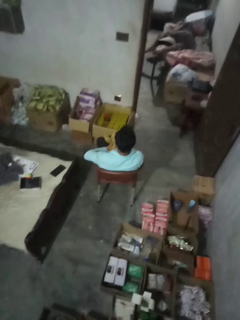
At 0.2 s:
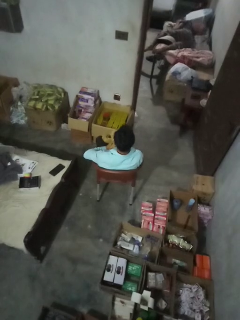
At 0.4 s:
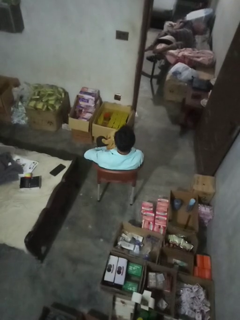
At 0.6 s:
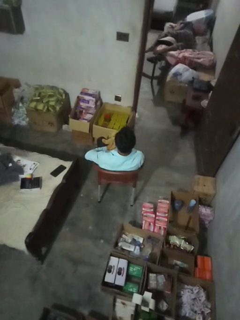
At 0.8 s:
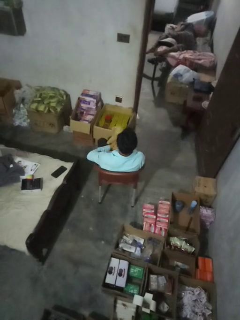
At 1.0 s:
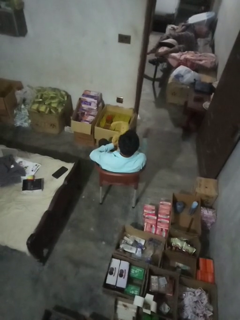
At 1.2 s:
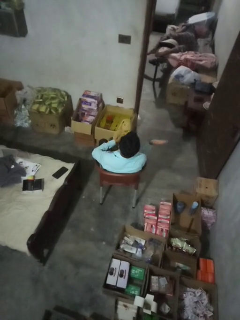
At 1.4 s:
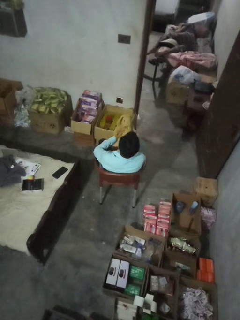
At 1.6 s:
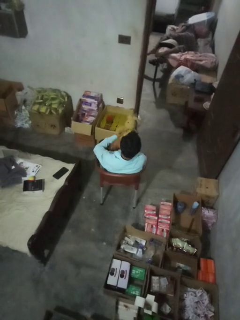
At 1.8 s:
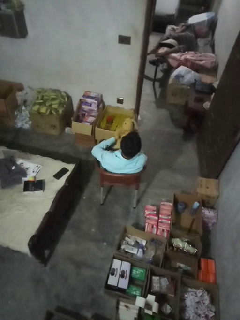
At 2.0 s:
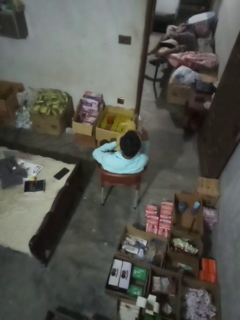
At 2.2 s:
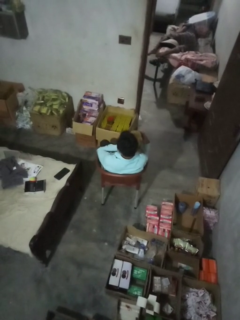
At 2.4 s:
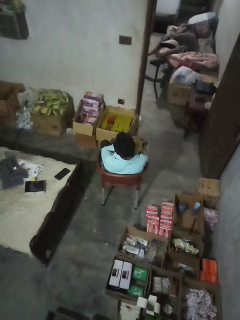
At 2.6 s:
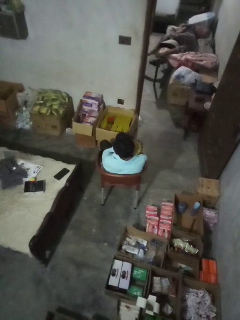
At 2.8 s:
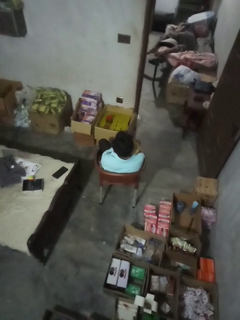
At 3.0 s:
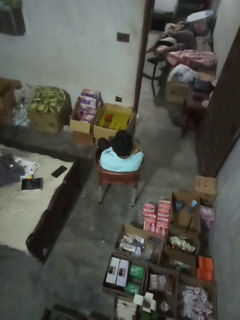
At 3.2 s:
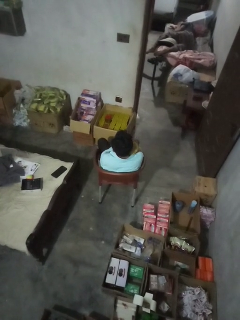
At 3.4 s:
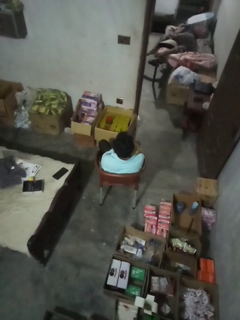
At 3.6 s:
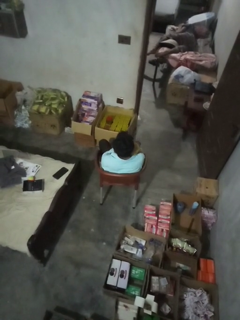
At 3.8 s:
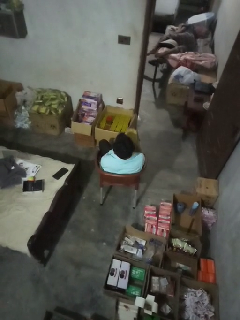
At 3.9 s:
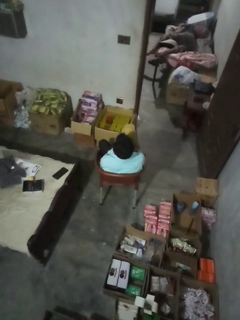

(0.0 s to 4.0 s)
person hugs stuffed animal

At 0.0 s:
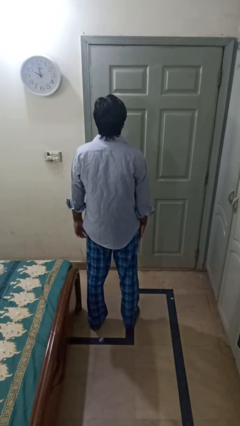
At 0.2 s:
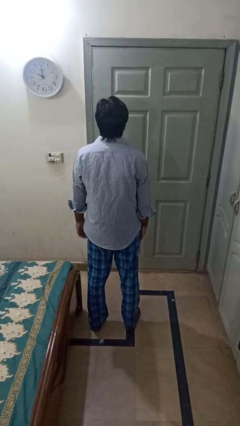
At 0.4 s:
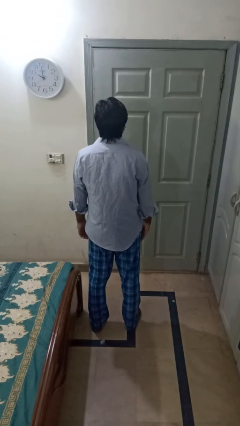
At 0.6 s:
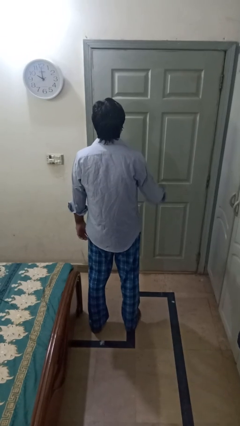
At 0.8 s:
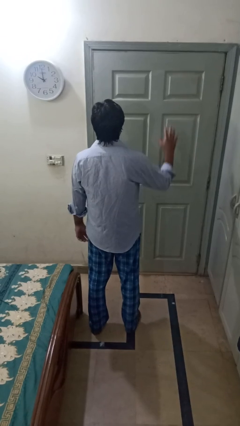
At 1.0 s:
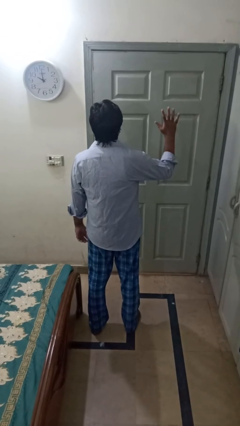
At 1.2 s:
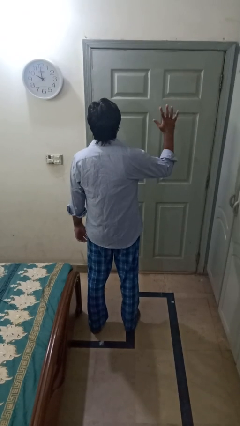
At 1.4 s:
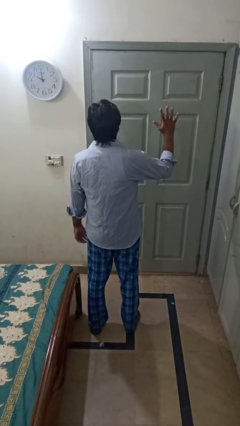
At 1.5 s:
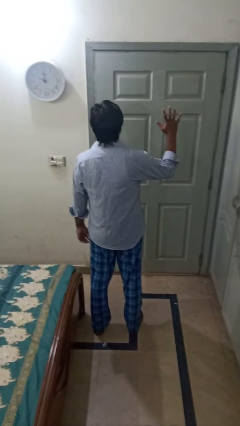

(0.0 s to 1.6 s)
person gestures number five

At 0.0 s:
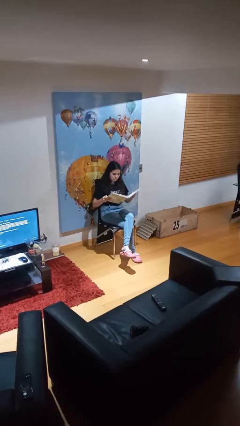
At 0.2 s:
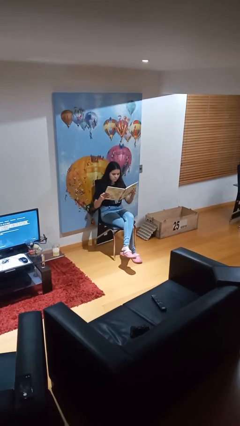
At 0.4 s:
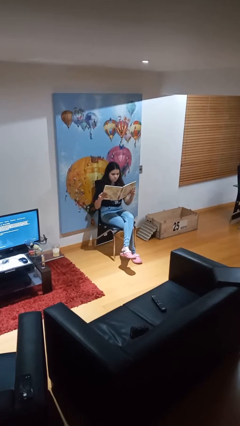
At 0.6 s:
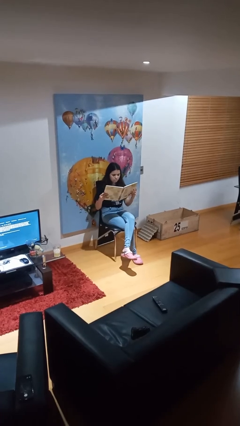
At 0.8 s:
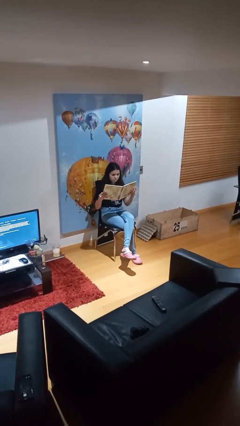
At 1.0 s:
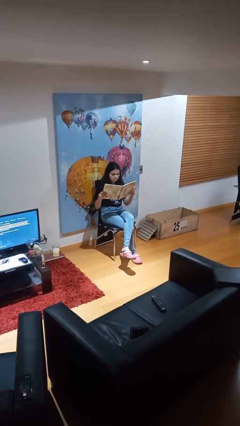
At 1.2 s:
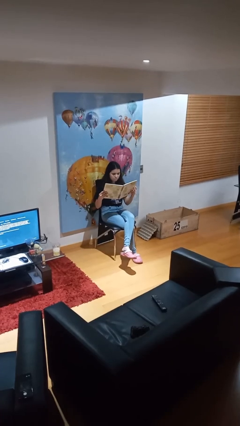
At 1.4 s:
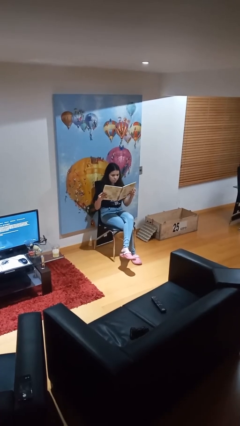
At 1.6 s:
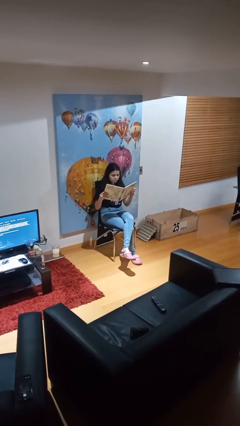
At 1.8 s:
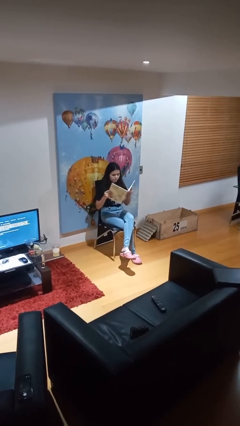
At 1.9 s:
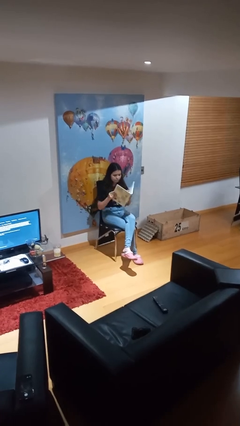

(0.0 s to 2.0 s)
person reads document

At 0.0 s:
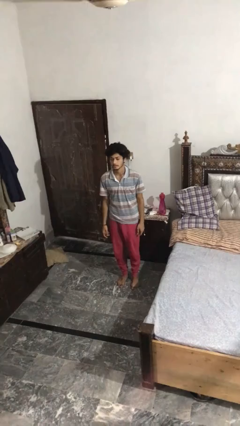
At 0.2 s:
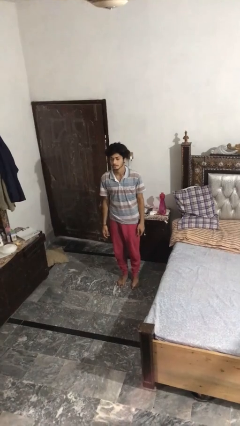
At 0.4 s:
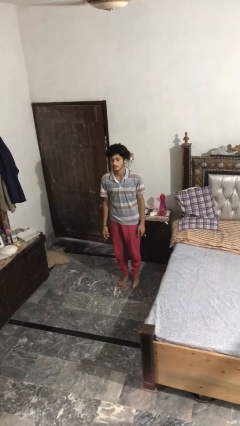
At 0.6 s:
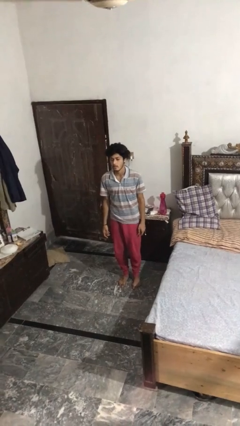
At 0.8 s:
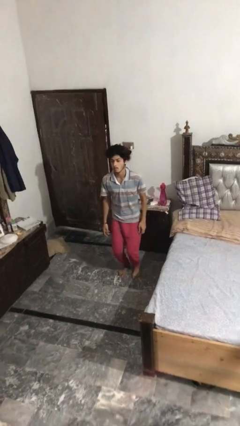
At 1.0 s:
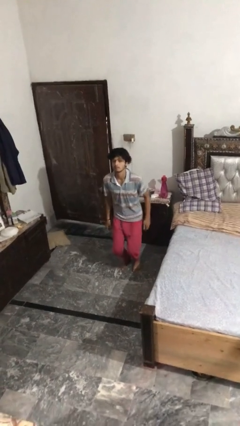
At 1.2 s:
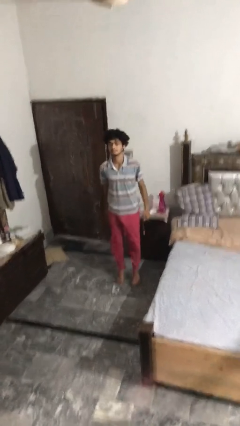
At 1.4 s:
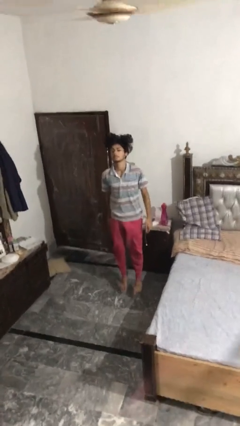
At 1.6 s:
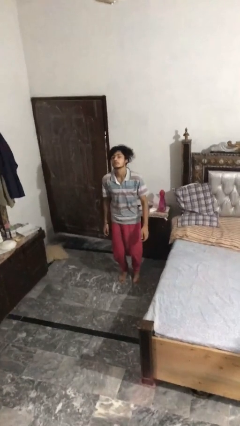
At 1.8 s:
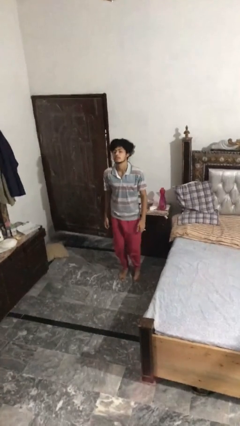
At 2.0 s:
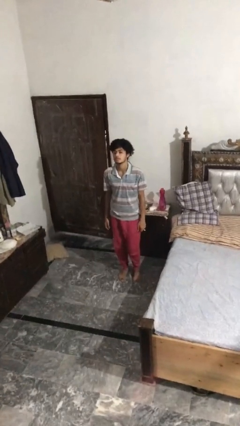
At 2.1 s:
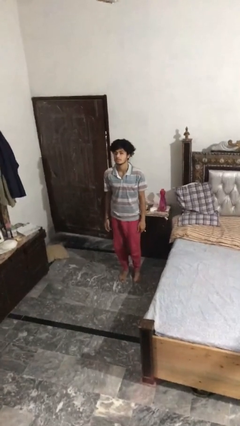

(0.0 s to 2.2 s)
person jumps

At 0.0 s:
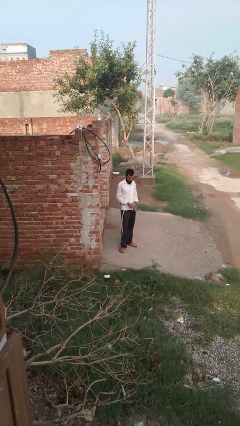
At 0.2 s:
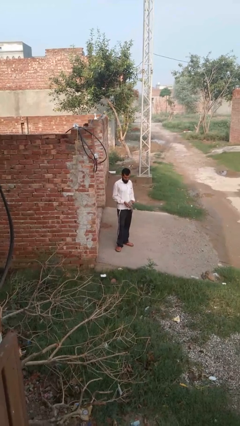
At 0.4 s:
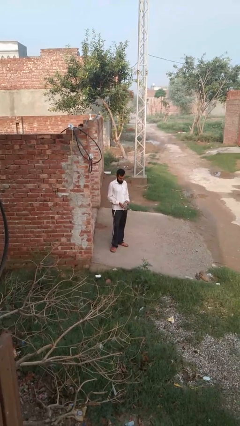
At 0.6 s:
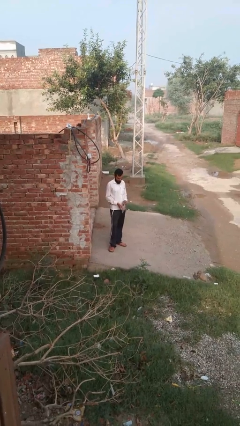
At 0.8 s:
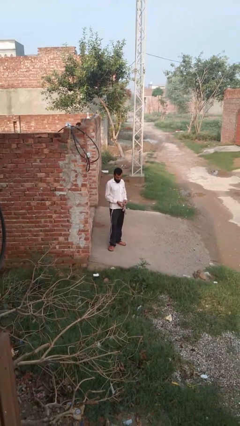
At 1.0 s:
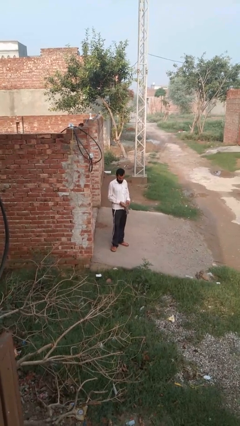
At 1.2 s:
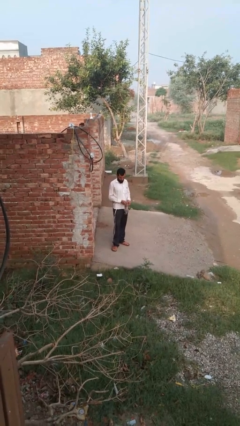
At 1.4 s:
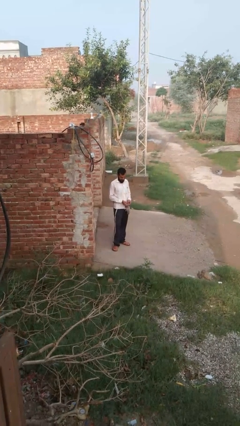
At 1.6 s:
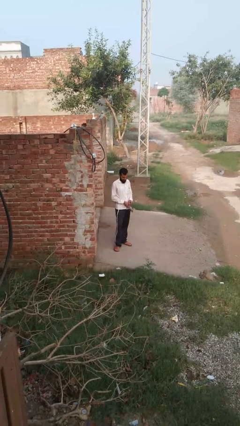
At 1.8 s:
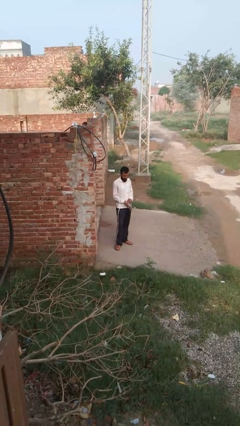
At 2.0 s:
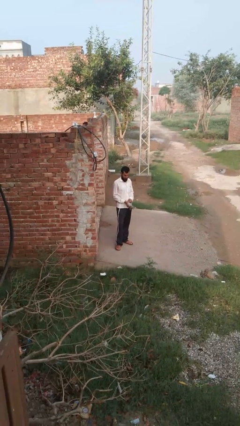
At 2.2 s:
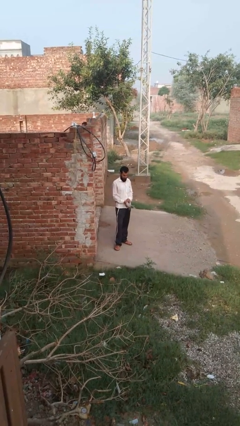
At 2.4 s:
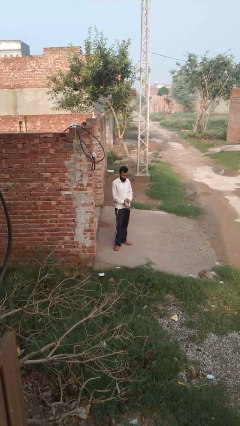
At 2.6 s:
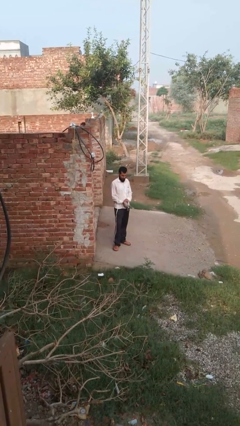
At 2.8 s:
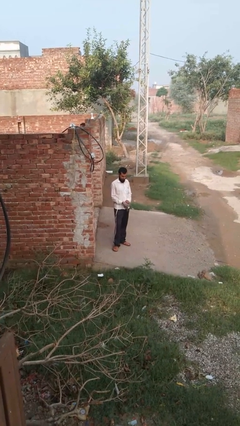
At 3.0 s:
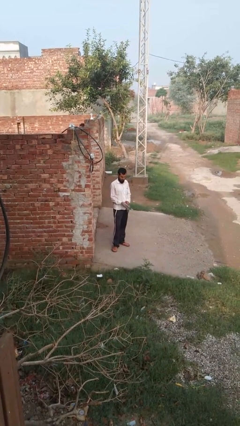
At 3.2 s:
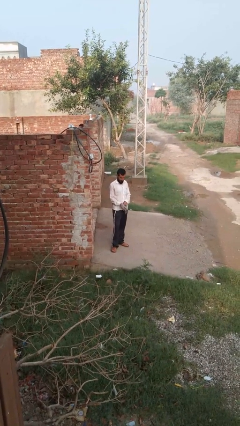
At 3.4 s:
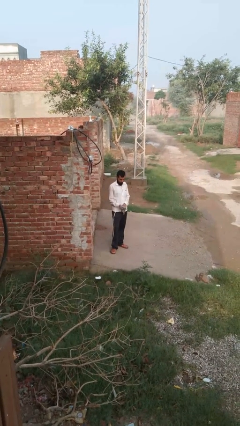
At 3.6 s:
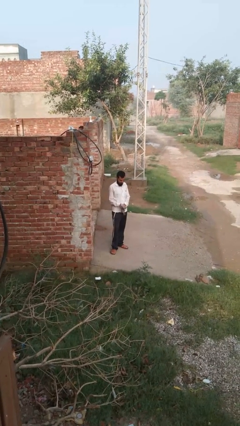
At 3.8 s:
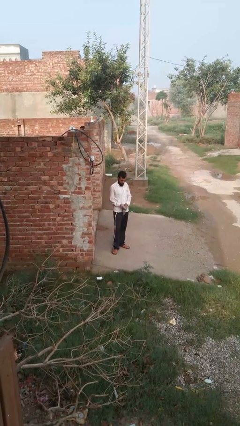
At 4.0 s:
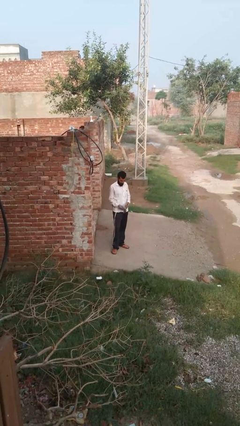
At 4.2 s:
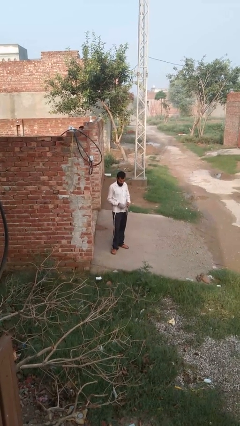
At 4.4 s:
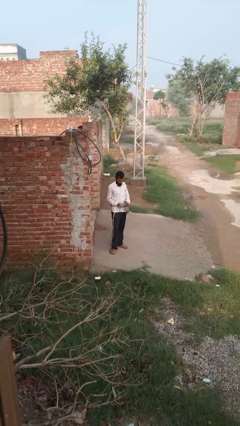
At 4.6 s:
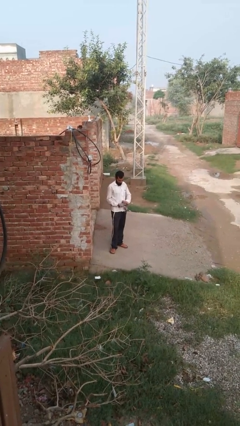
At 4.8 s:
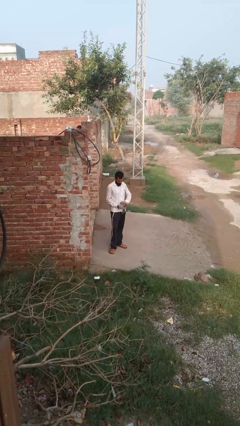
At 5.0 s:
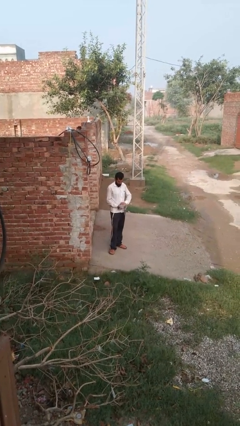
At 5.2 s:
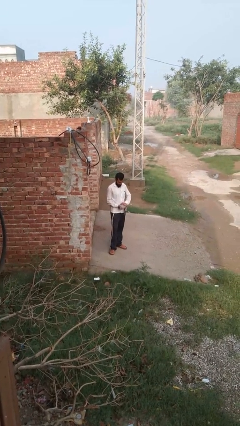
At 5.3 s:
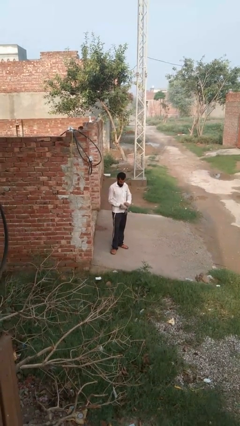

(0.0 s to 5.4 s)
person puts on gloves

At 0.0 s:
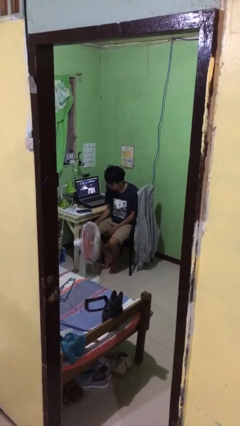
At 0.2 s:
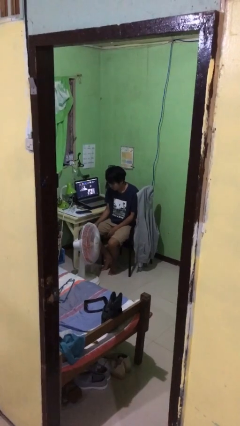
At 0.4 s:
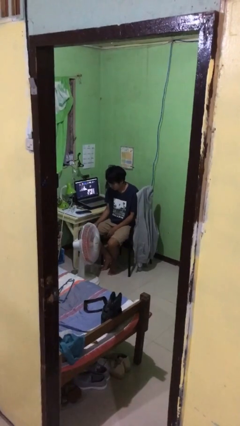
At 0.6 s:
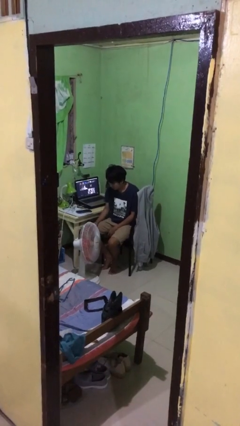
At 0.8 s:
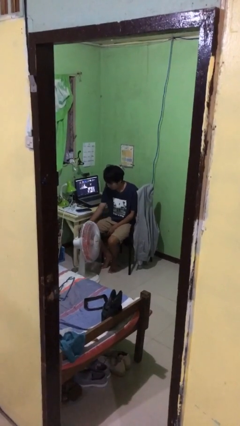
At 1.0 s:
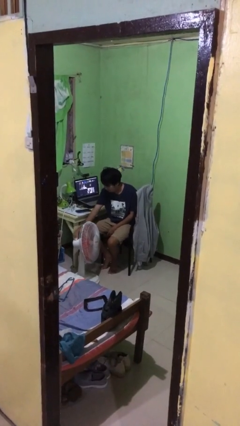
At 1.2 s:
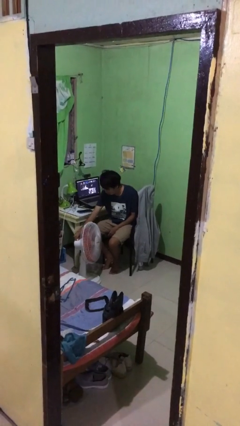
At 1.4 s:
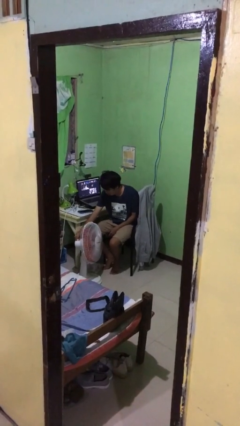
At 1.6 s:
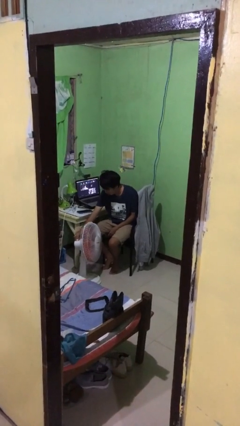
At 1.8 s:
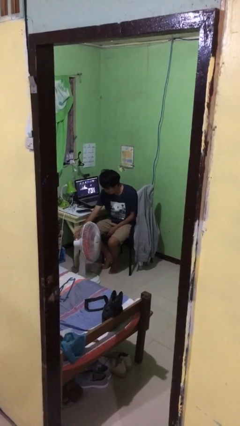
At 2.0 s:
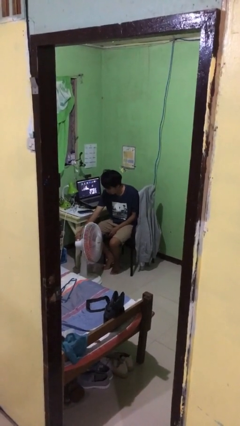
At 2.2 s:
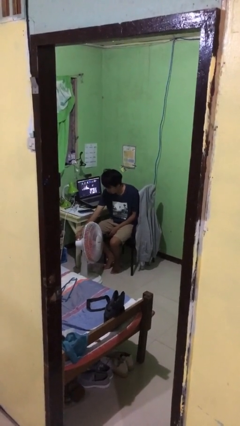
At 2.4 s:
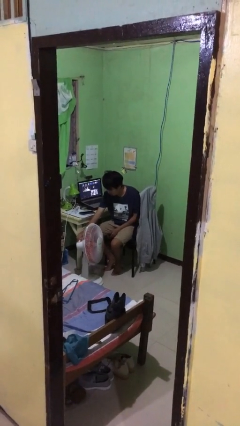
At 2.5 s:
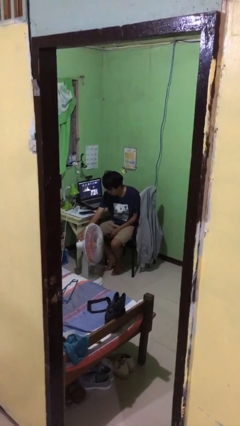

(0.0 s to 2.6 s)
person turns on fan

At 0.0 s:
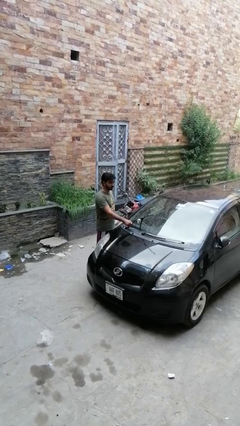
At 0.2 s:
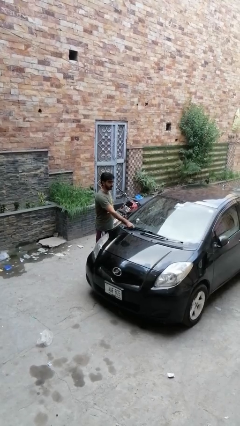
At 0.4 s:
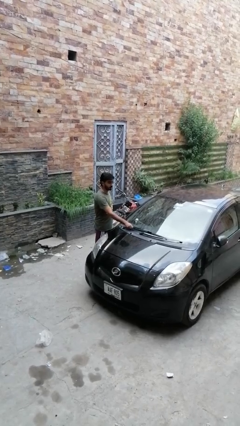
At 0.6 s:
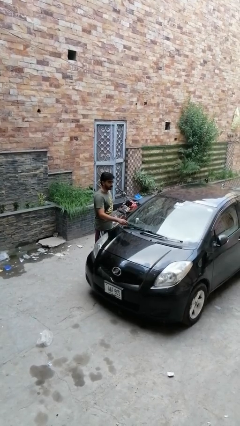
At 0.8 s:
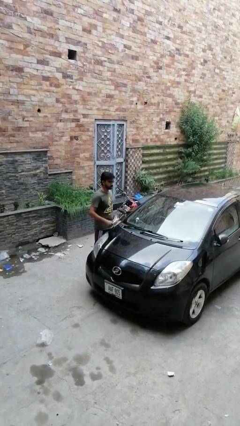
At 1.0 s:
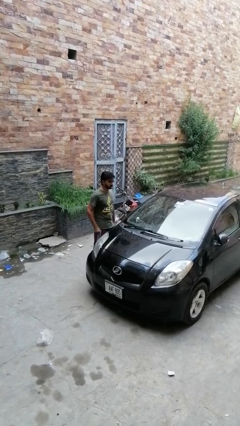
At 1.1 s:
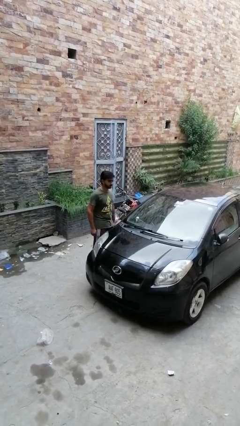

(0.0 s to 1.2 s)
person flips down car wipers
